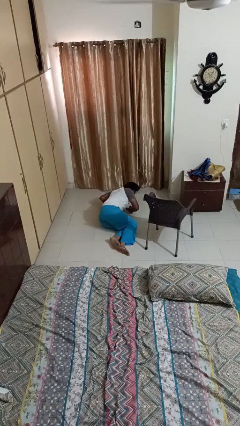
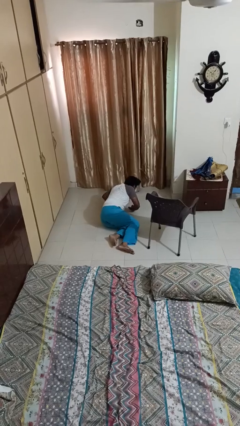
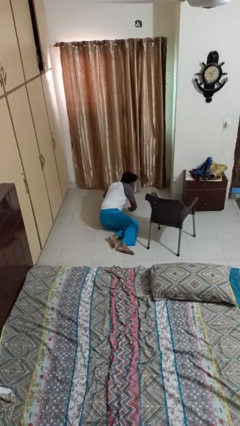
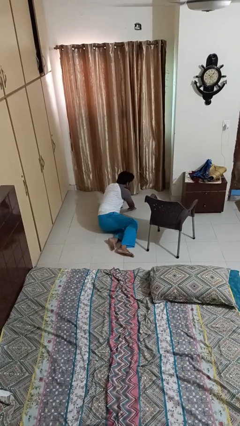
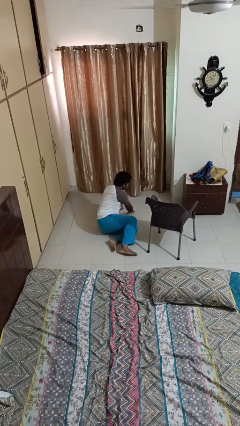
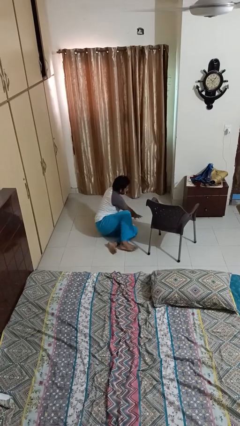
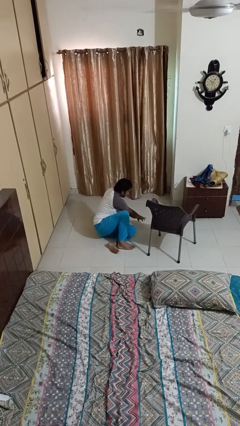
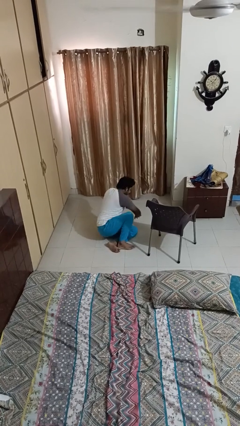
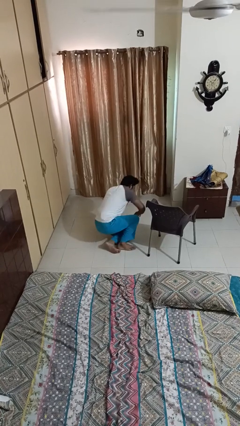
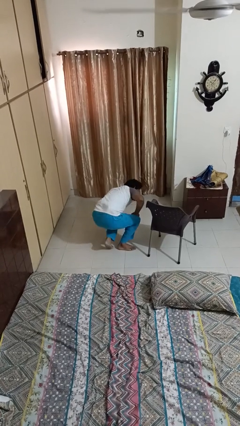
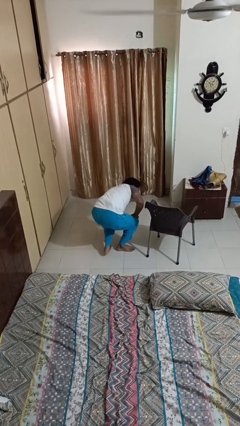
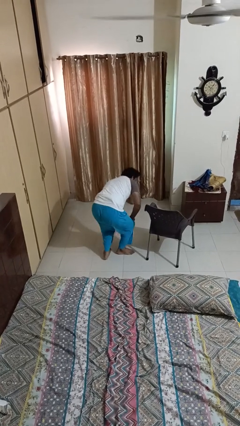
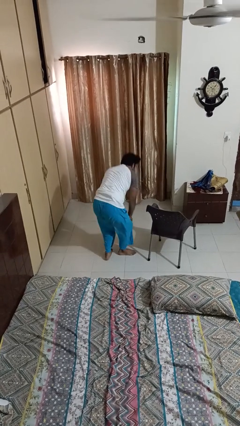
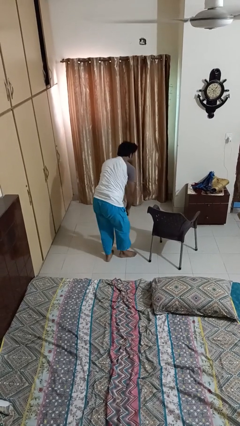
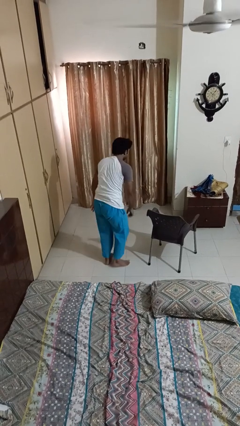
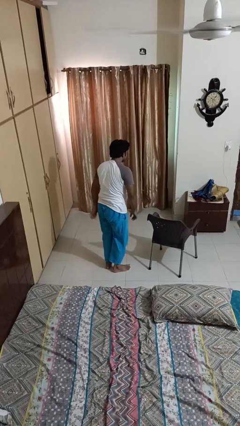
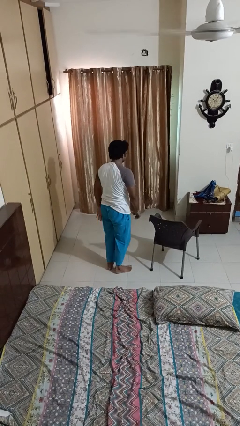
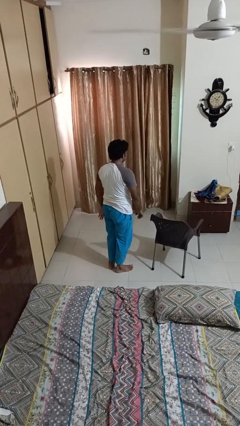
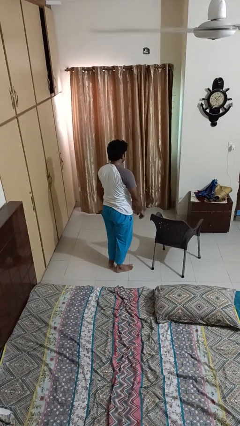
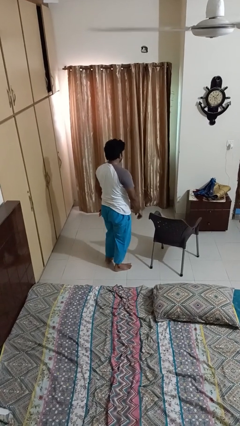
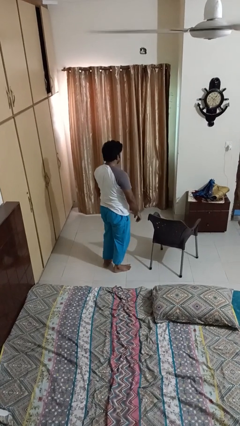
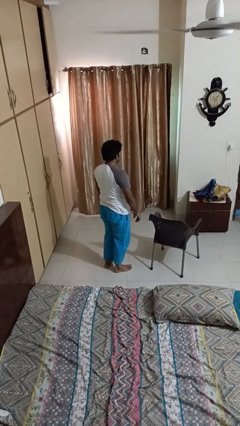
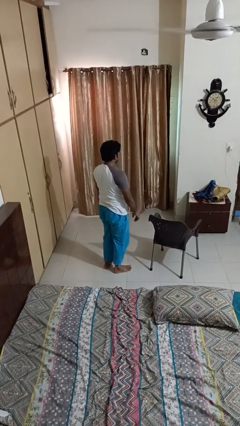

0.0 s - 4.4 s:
person stands up from floor

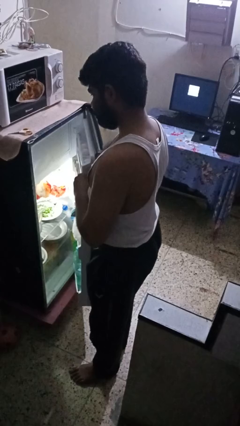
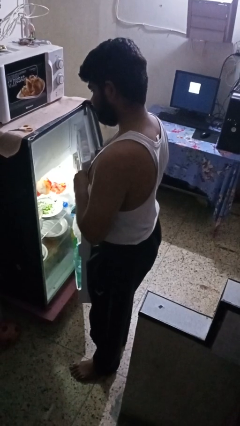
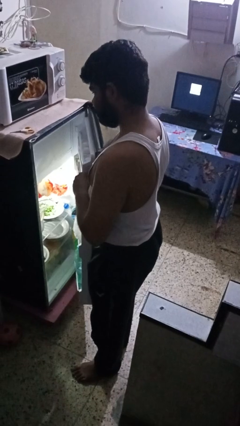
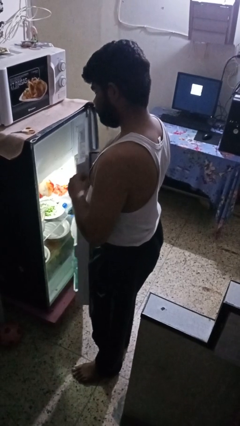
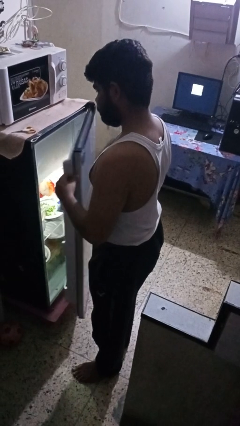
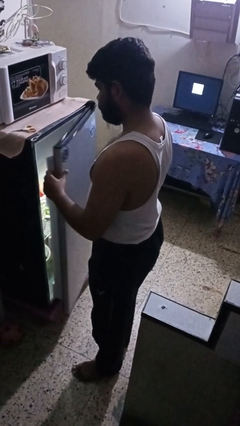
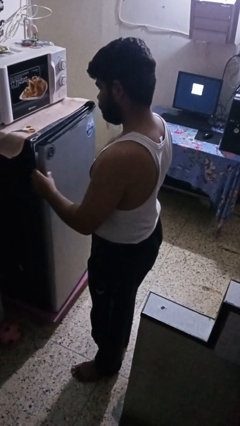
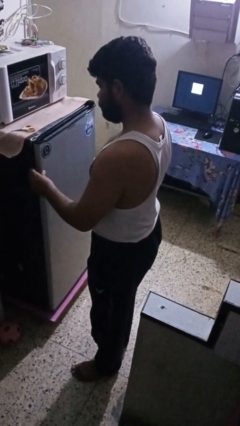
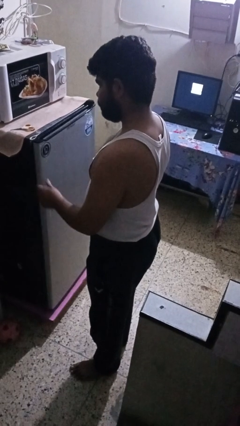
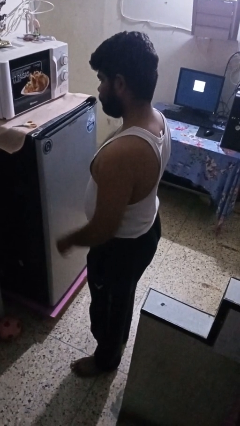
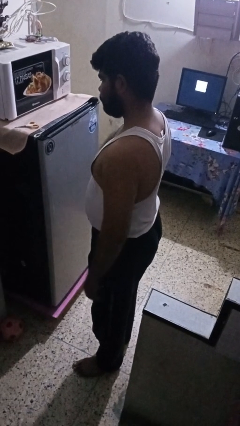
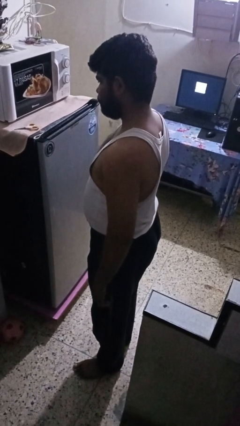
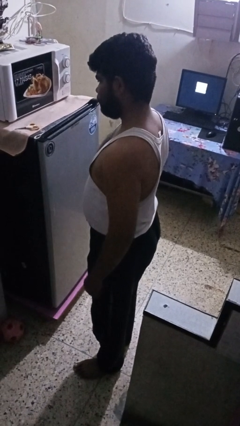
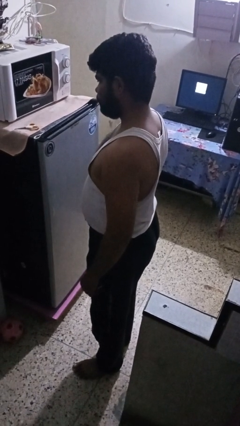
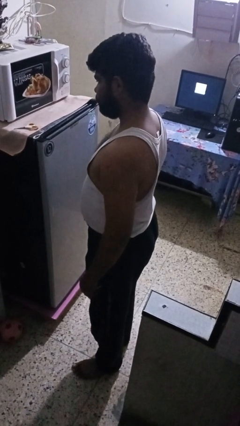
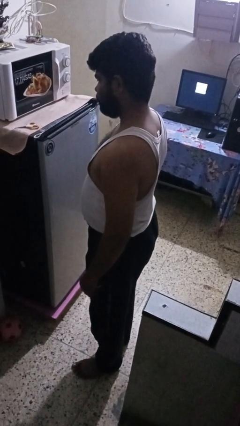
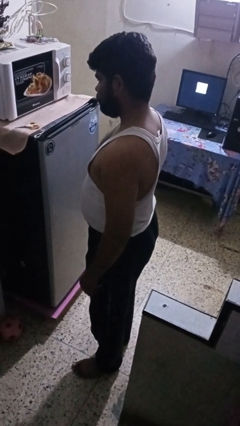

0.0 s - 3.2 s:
person closes refrigerator

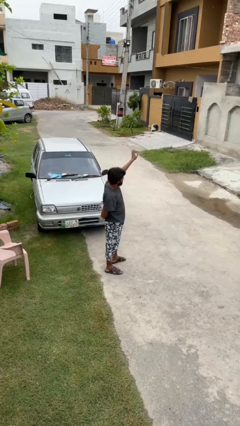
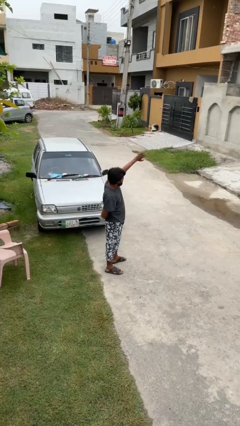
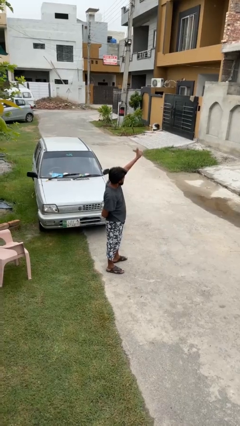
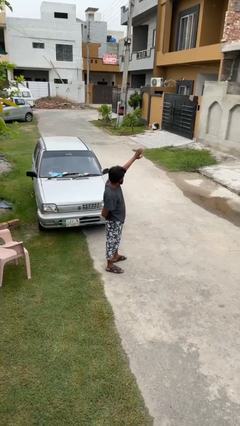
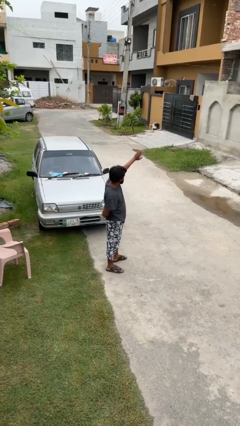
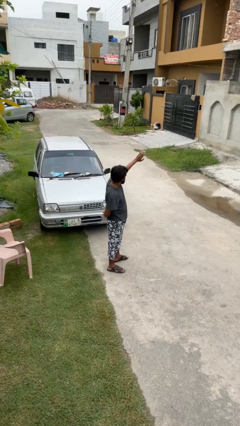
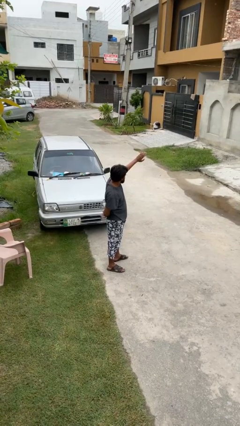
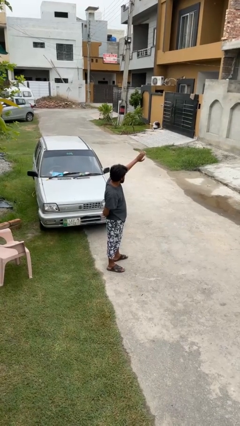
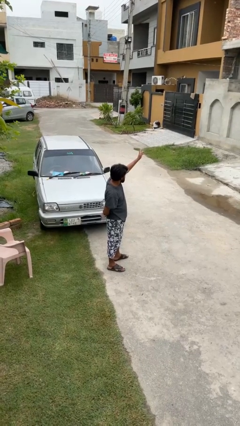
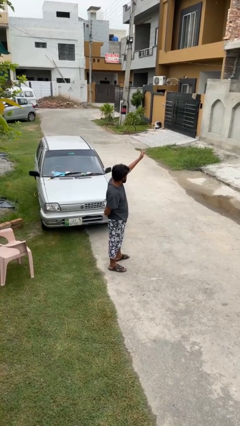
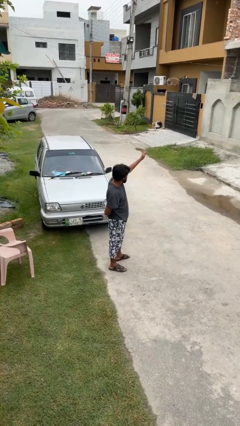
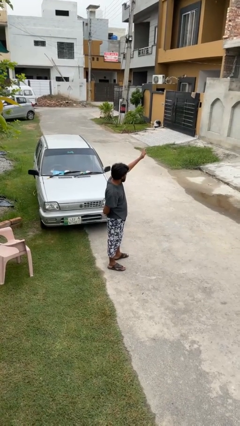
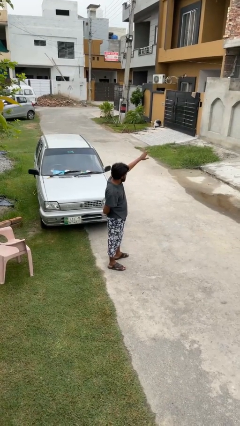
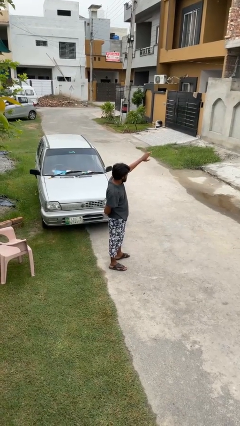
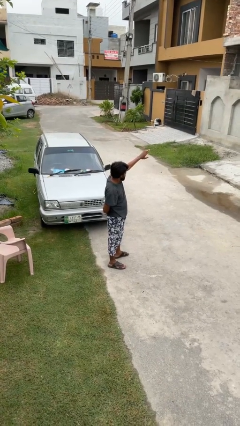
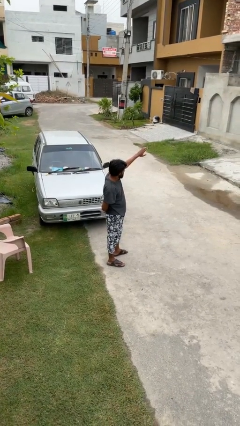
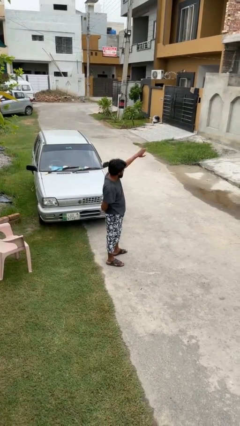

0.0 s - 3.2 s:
person waves at person

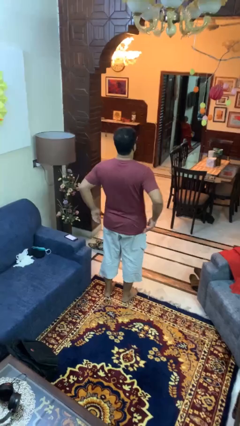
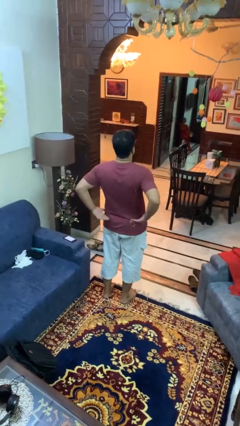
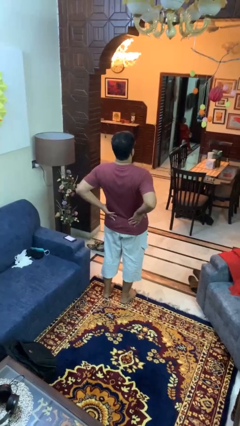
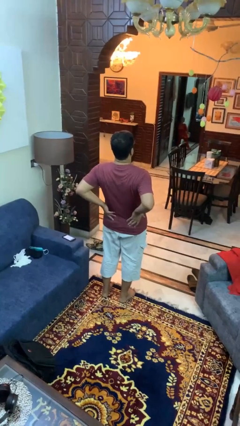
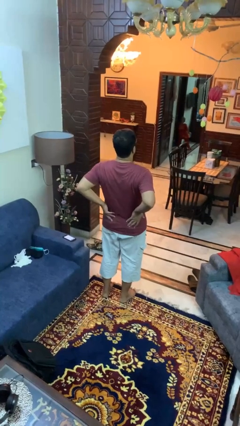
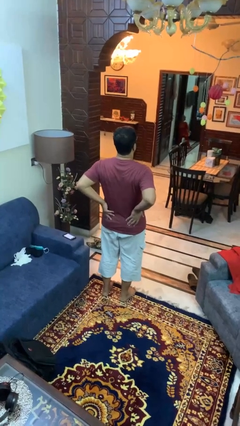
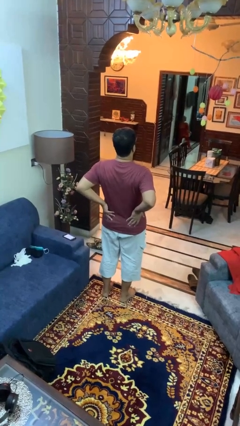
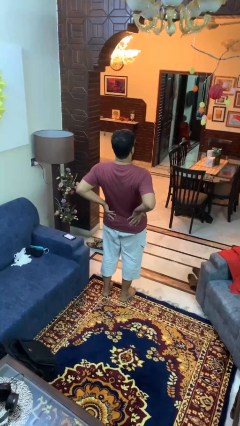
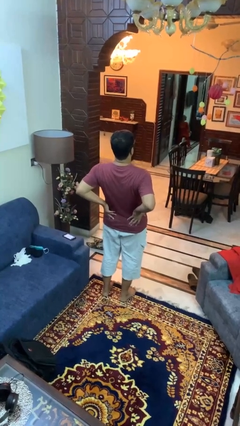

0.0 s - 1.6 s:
person stretches back

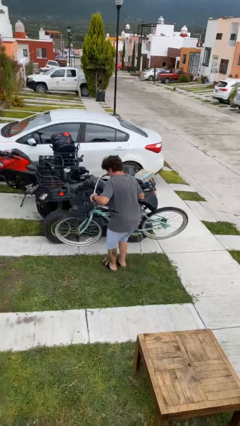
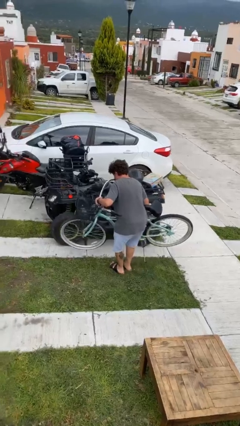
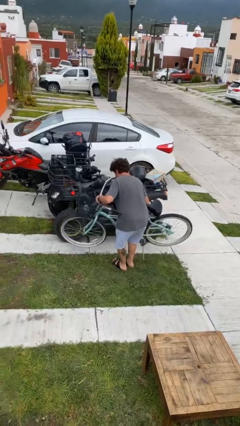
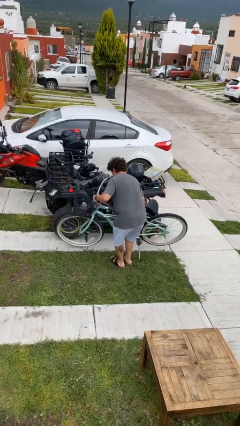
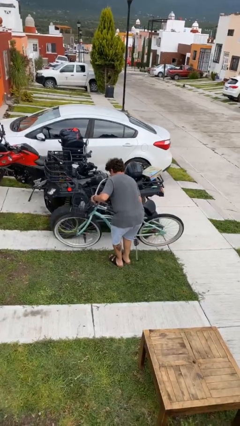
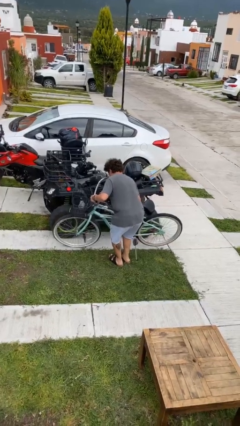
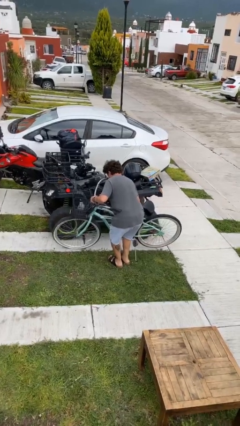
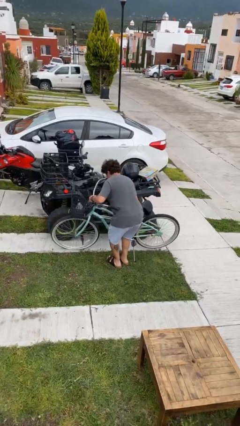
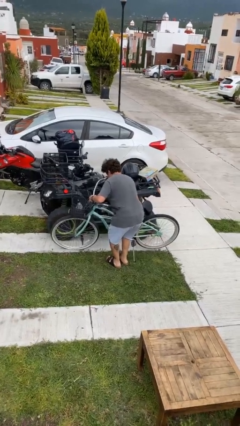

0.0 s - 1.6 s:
person puts down object on floor

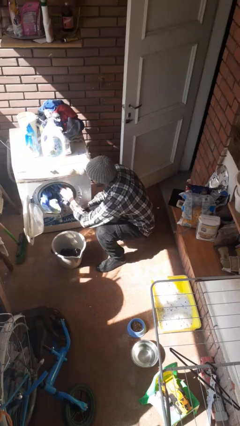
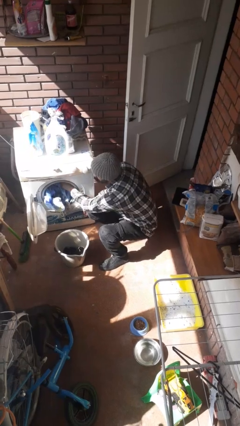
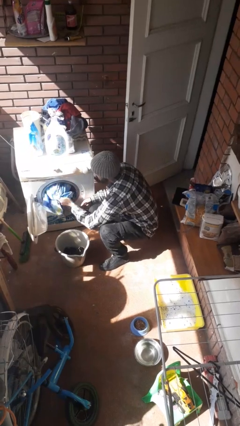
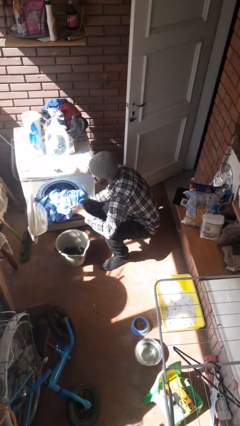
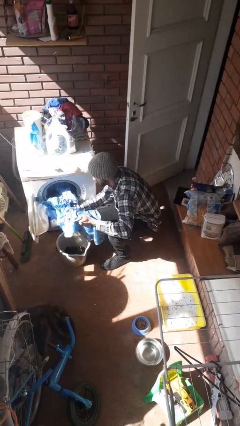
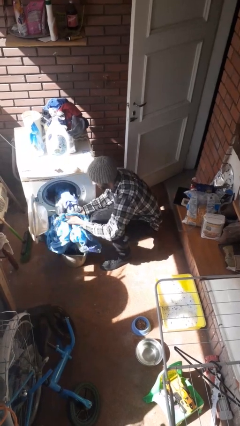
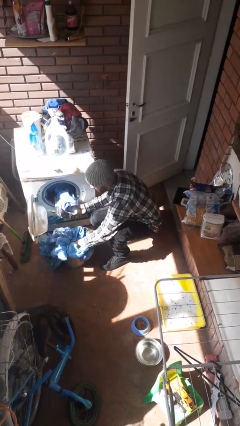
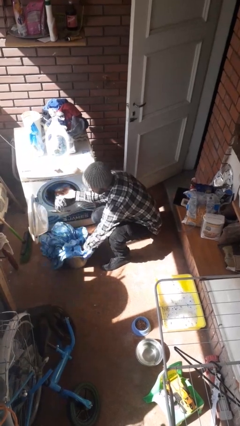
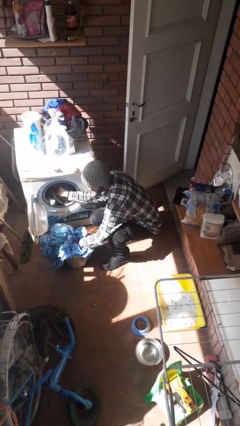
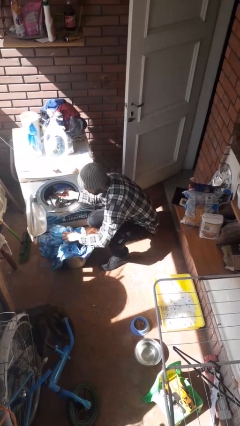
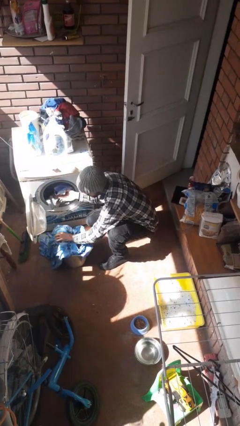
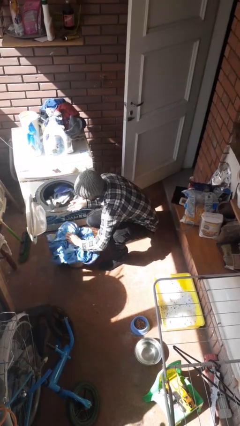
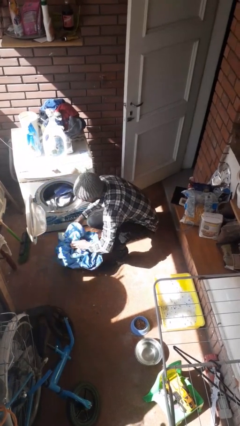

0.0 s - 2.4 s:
person unloads clotheswasher

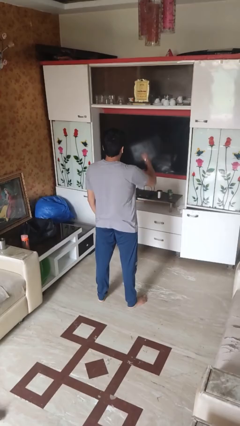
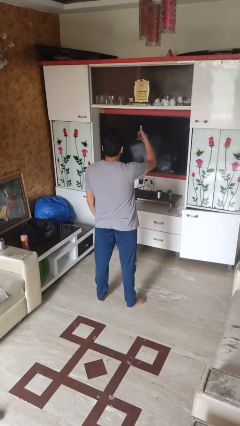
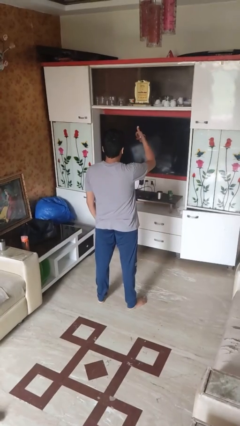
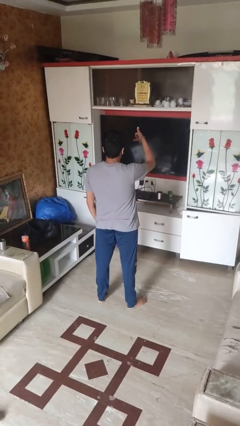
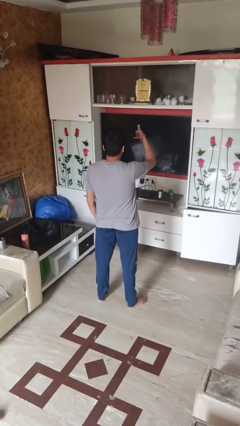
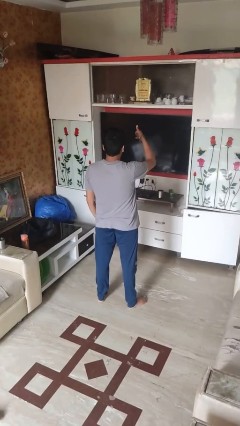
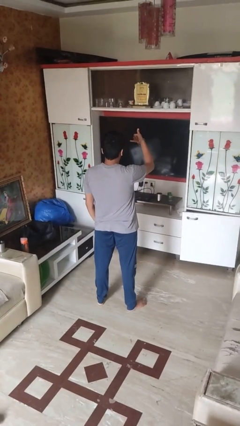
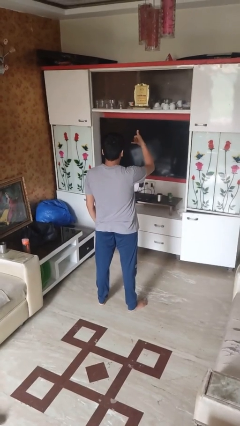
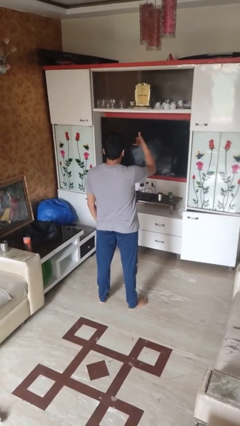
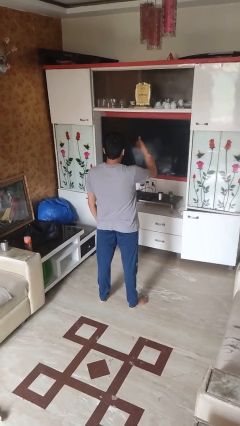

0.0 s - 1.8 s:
person gestures hang loose
